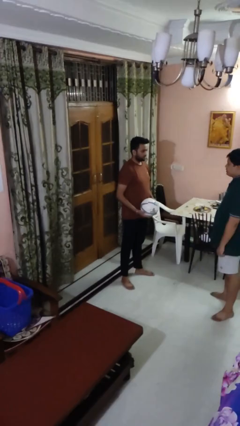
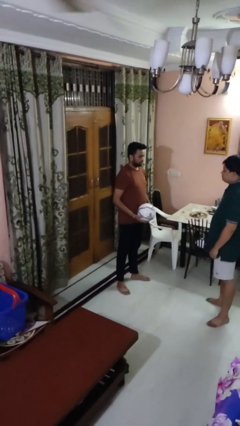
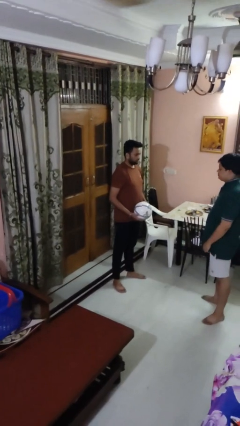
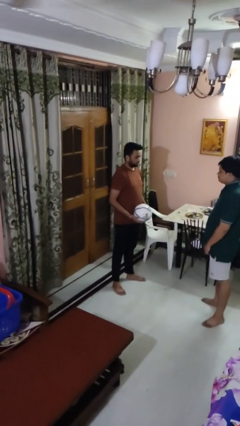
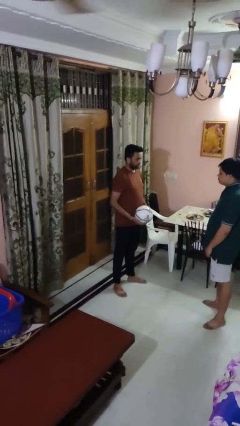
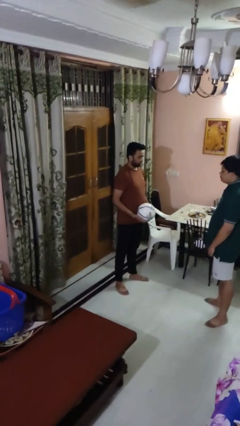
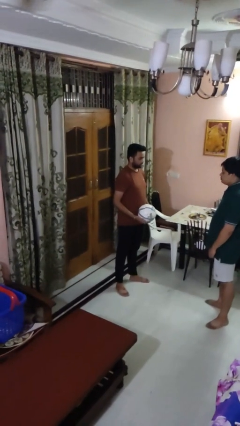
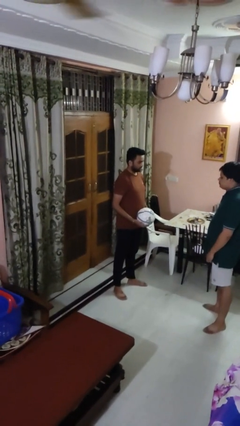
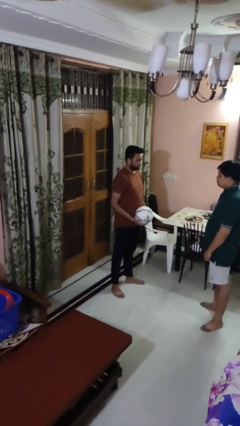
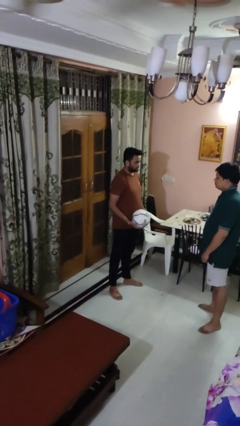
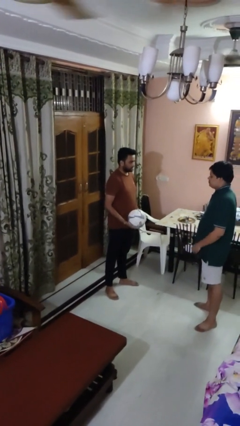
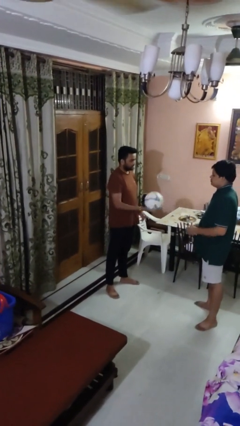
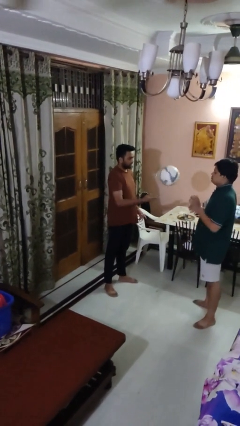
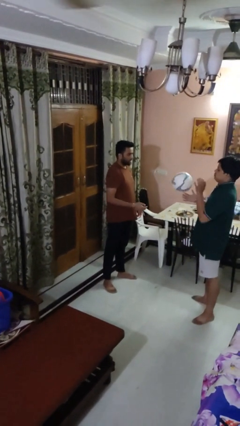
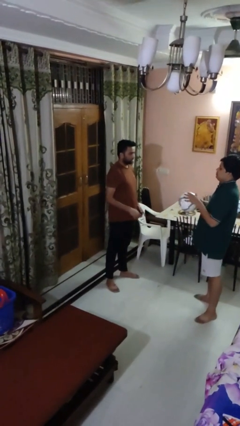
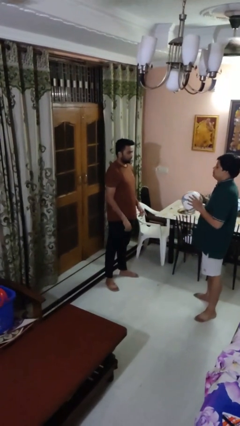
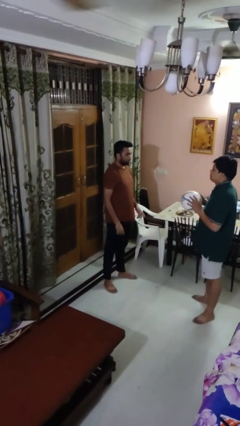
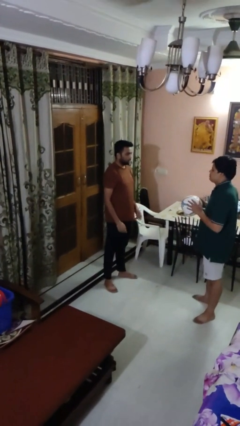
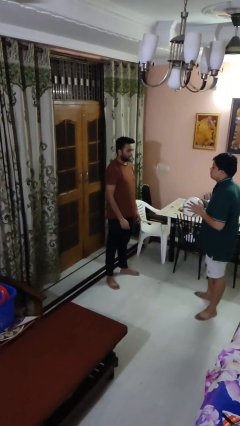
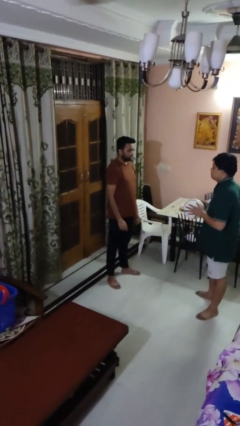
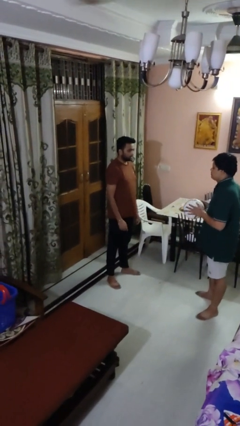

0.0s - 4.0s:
person throws object to person

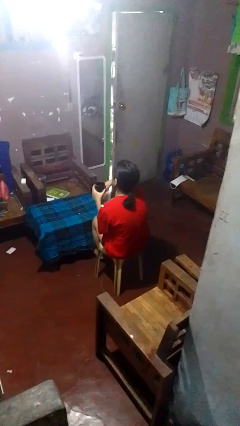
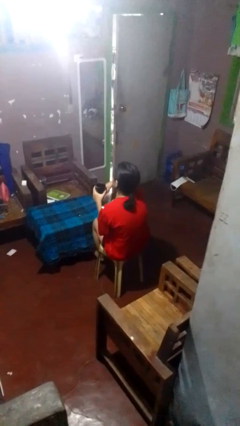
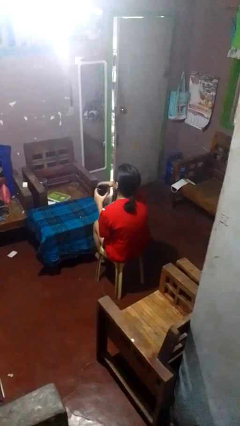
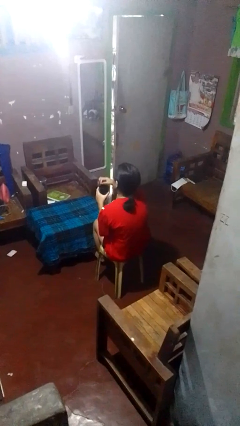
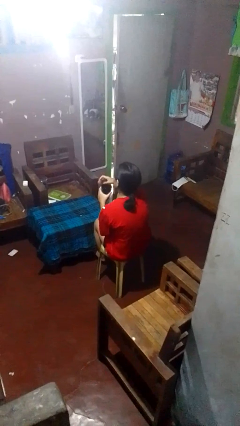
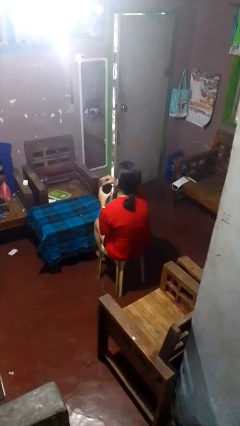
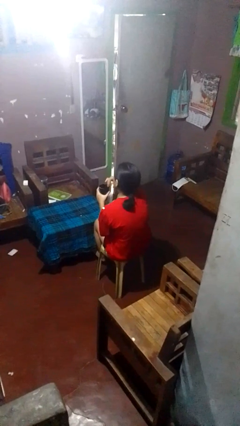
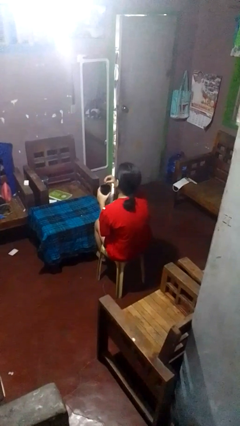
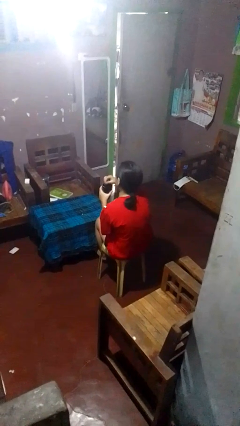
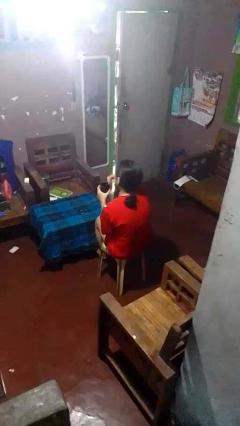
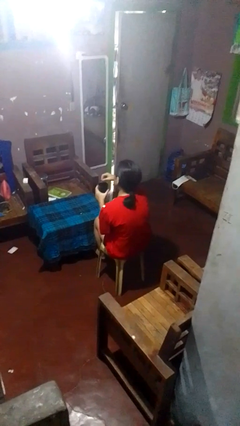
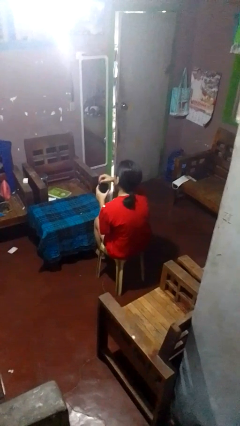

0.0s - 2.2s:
person stirs mug

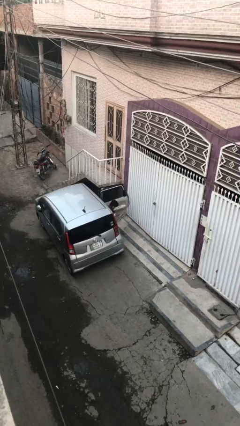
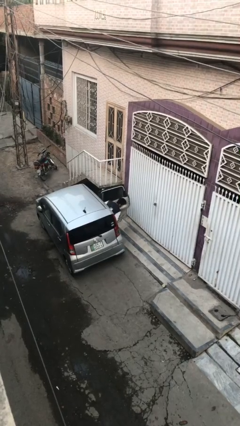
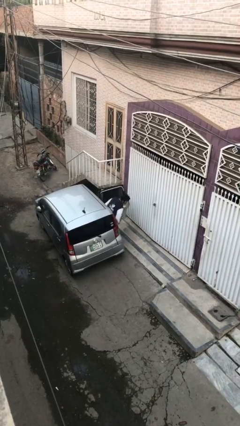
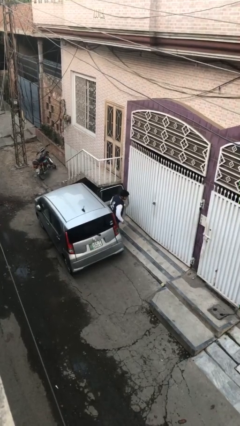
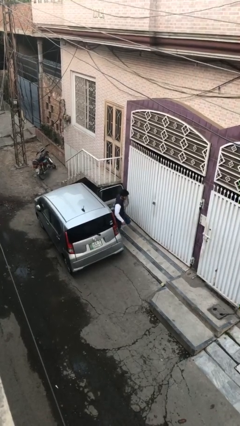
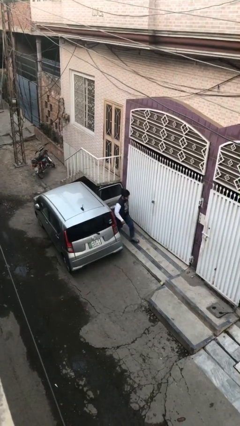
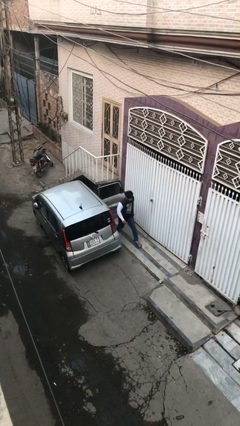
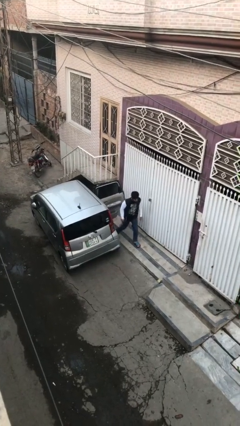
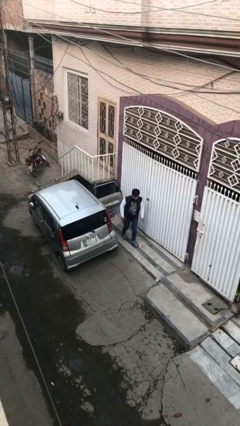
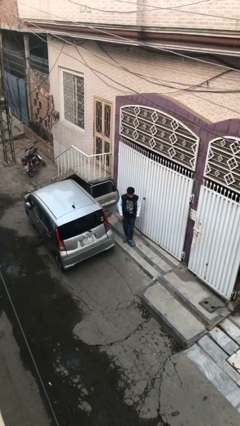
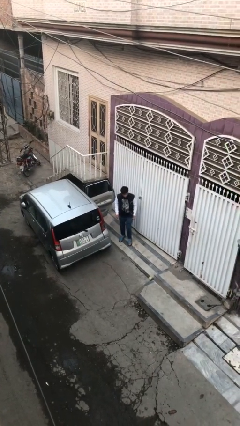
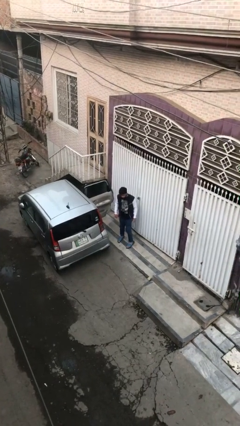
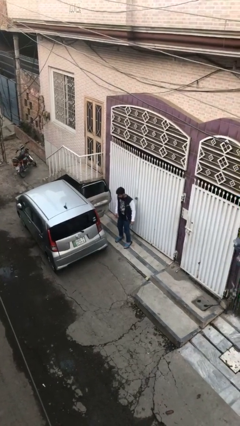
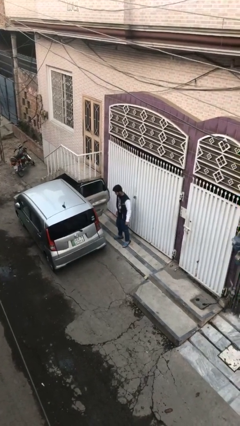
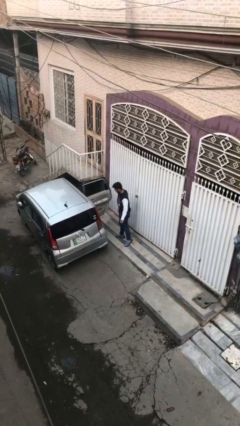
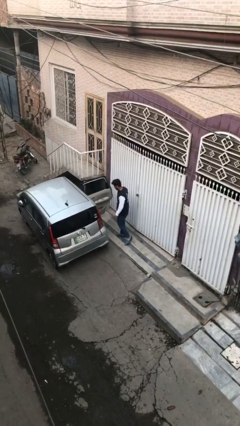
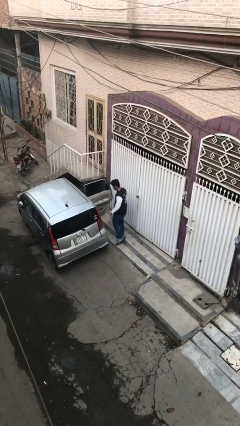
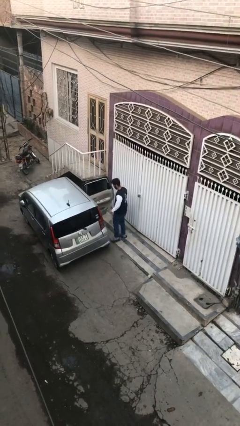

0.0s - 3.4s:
person exits car

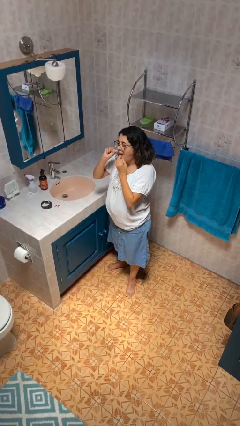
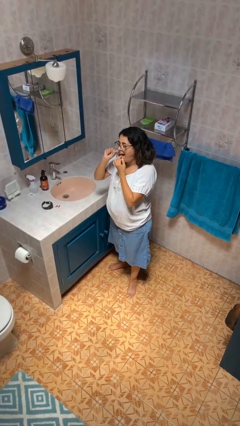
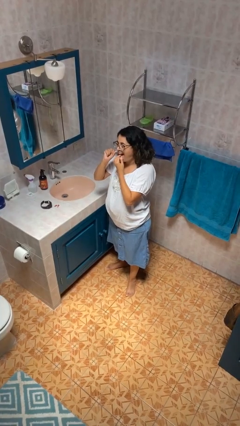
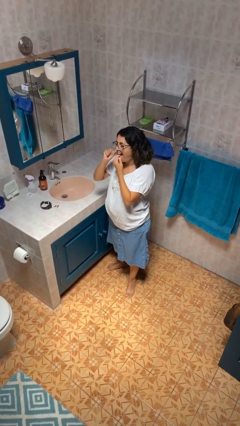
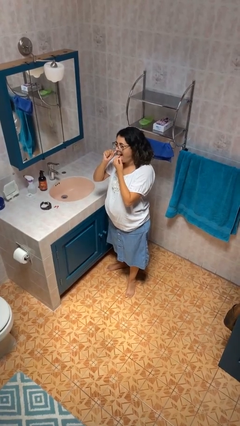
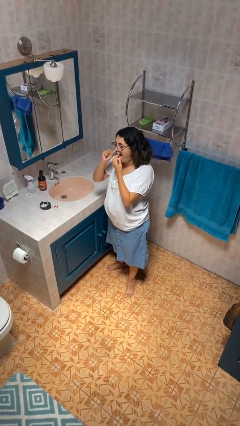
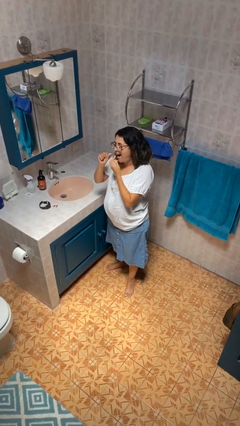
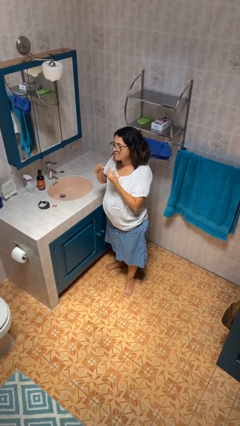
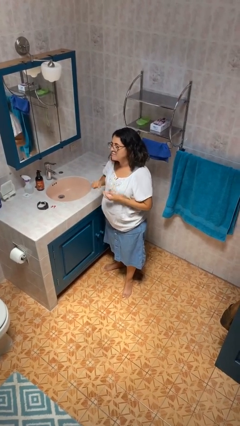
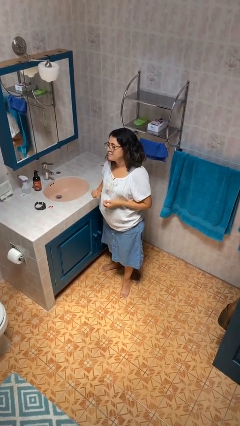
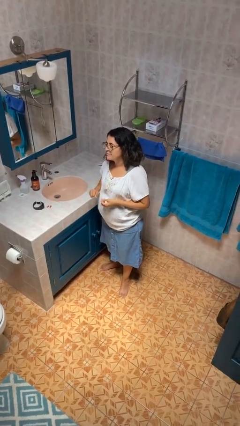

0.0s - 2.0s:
person flosses

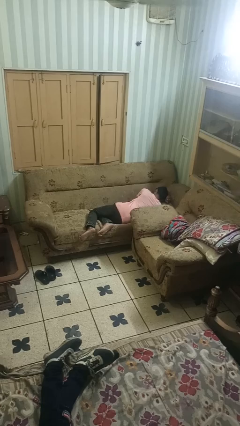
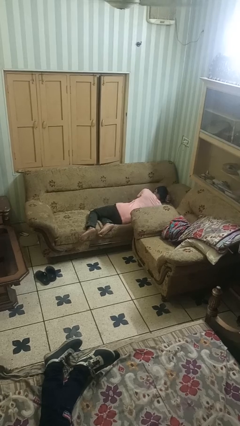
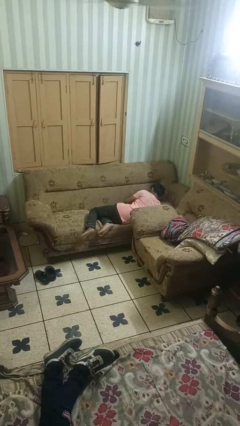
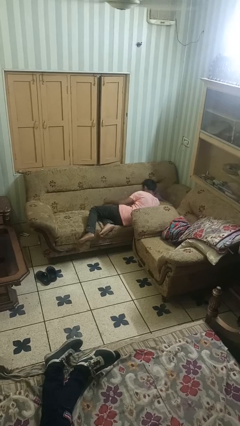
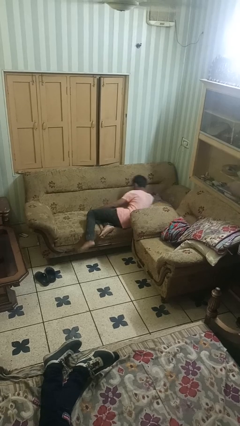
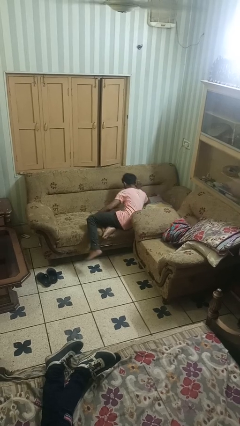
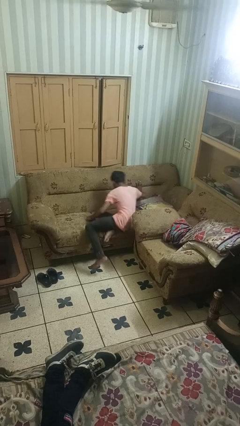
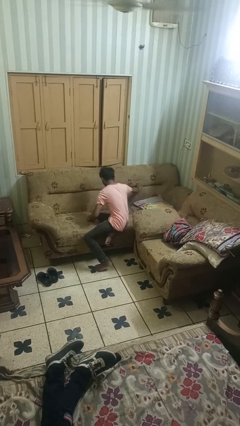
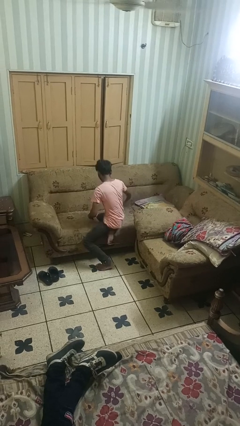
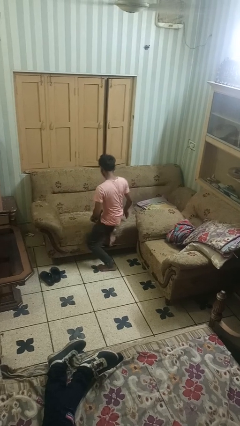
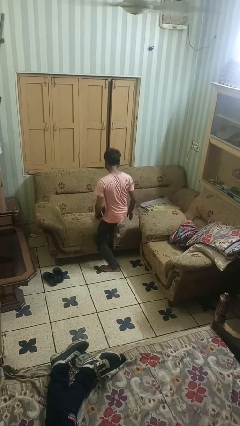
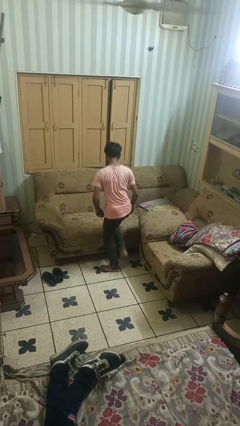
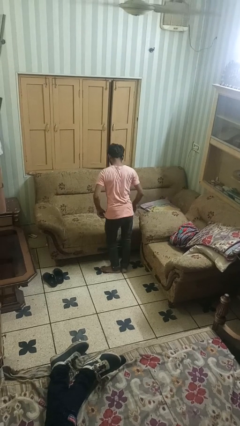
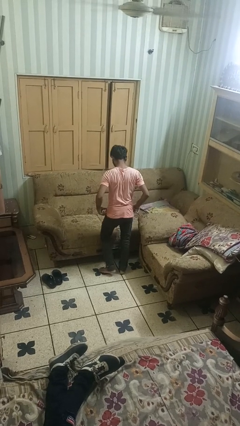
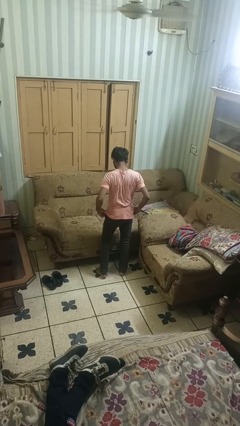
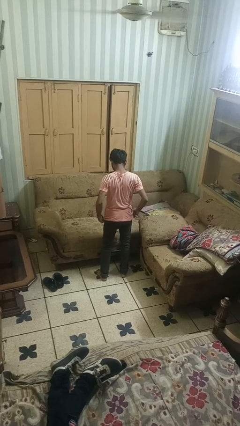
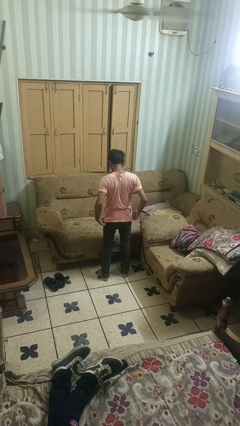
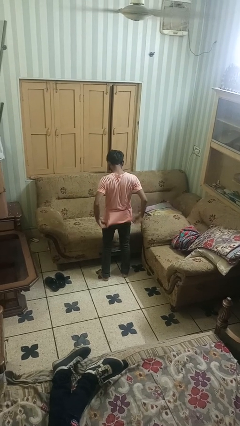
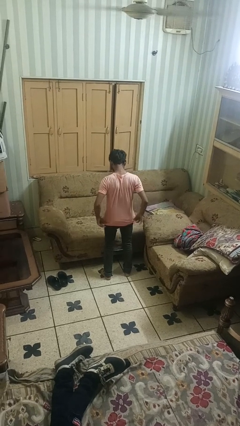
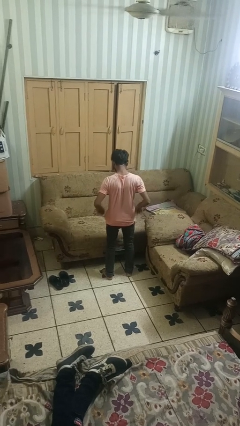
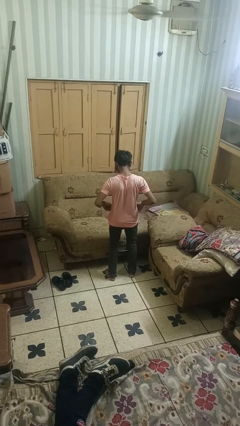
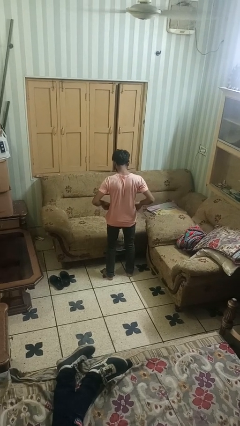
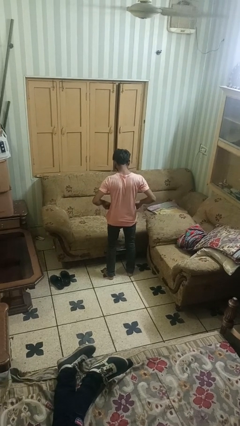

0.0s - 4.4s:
person stands up

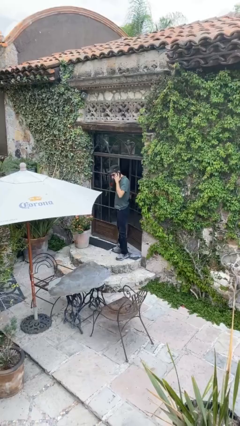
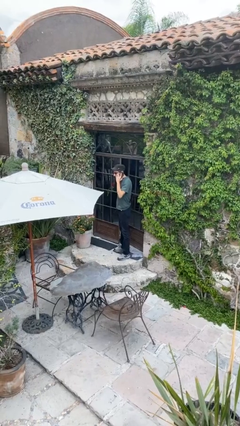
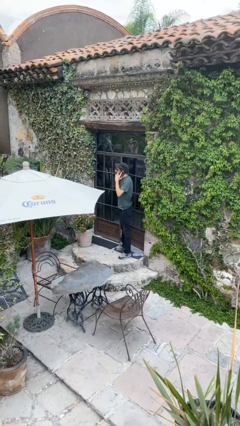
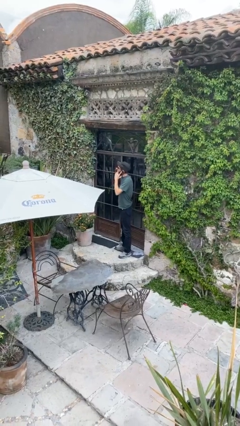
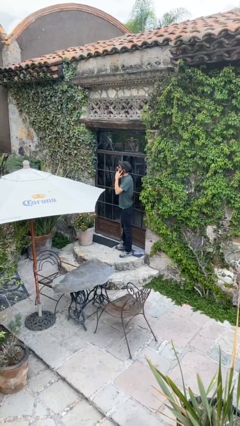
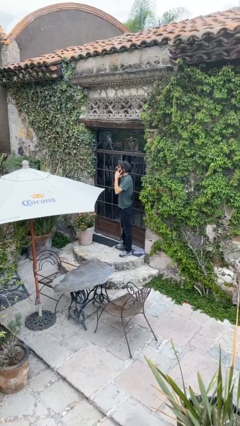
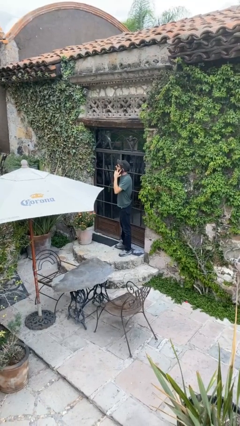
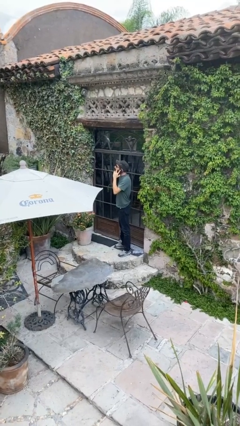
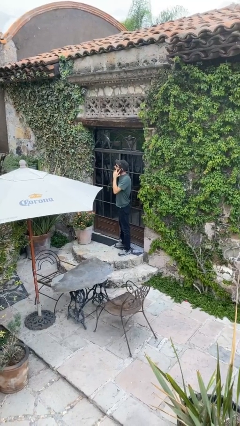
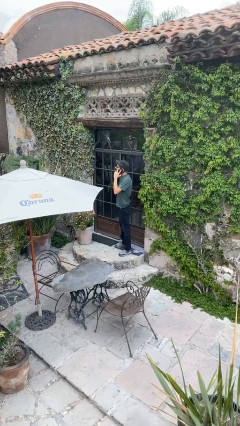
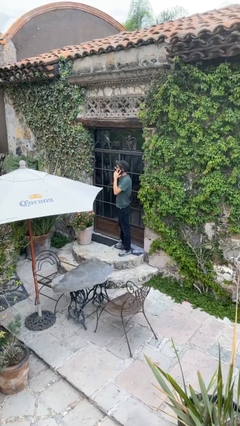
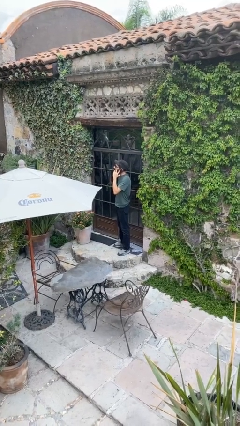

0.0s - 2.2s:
person closes facility door
